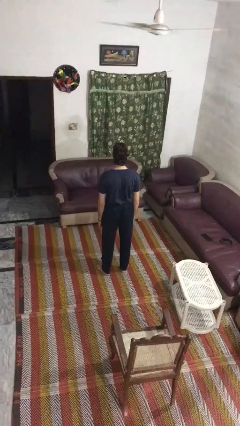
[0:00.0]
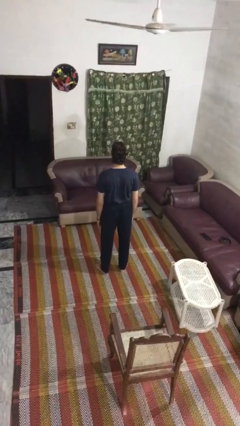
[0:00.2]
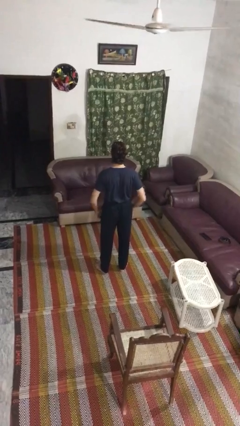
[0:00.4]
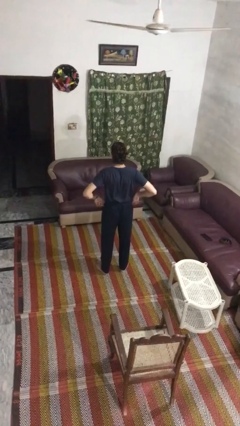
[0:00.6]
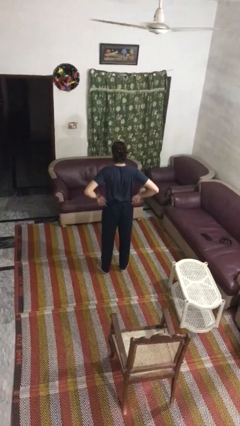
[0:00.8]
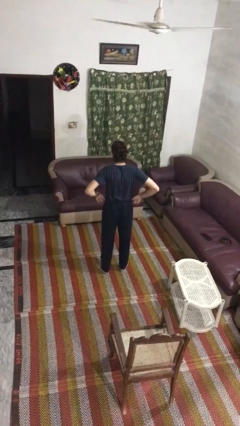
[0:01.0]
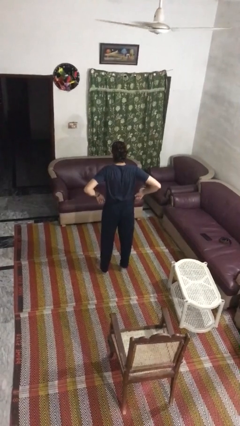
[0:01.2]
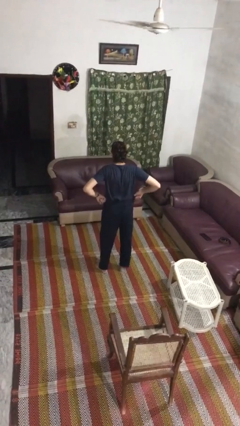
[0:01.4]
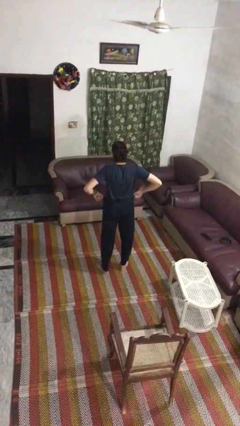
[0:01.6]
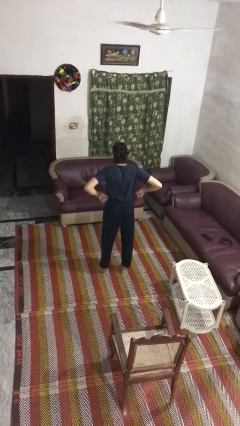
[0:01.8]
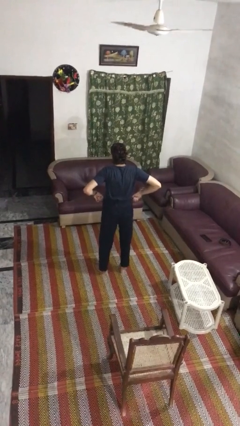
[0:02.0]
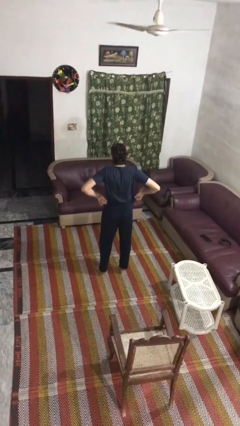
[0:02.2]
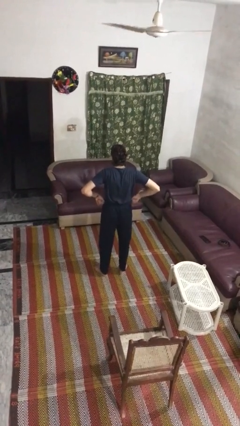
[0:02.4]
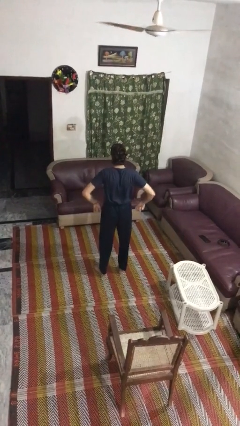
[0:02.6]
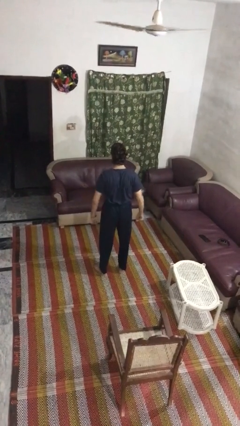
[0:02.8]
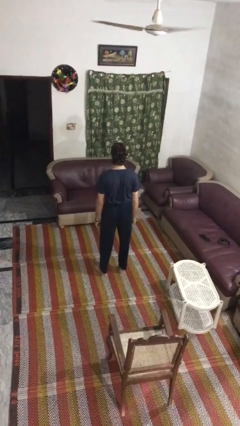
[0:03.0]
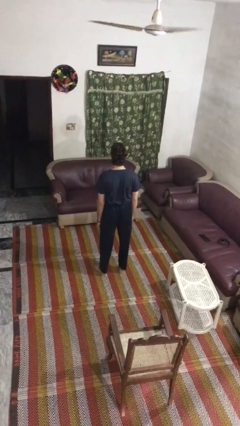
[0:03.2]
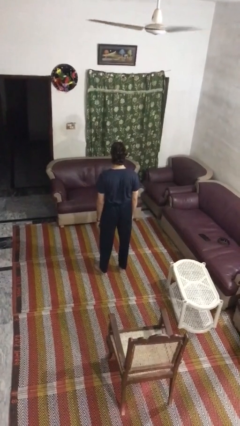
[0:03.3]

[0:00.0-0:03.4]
person hikes up pants

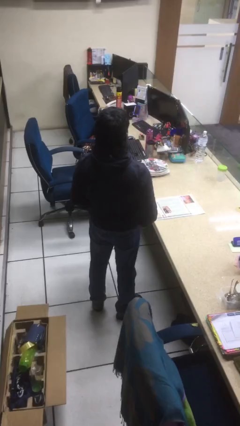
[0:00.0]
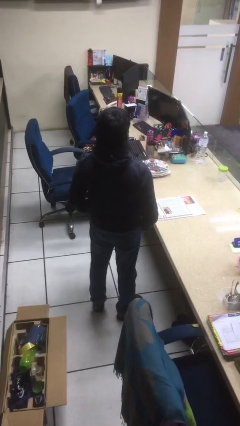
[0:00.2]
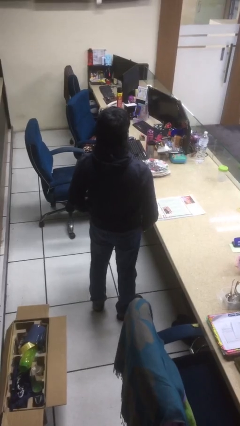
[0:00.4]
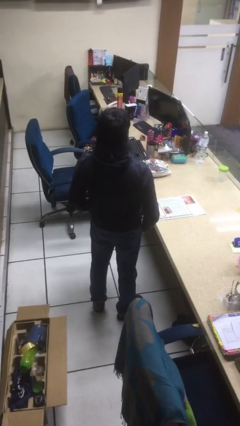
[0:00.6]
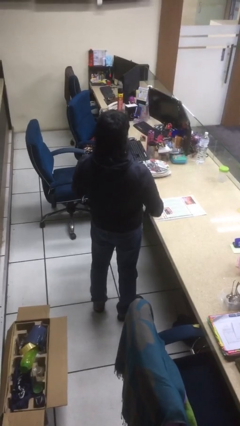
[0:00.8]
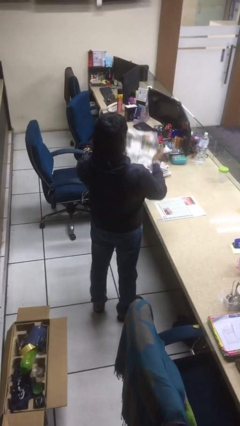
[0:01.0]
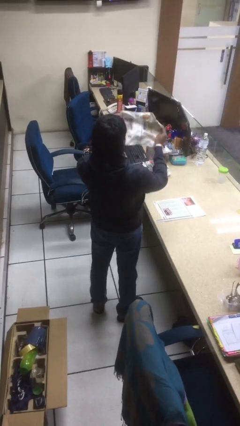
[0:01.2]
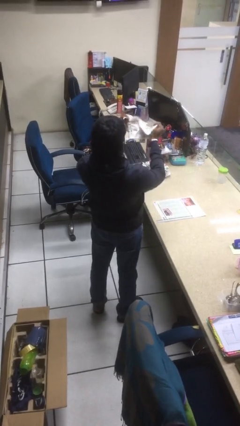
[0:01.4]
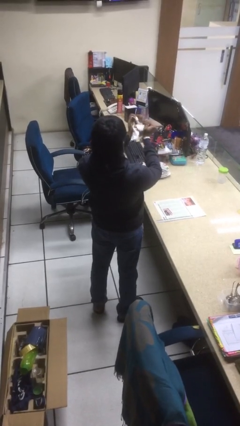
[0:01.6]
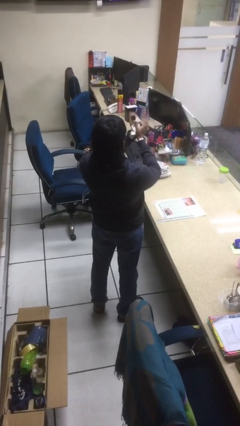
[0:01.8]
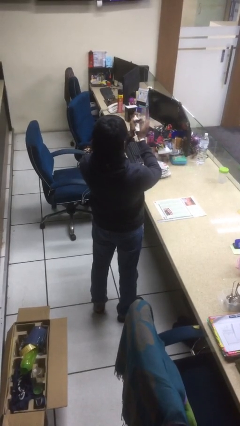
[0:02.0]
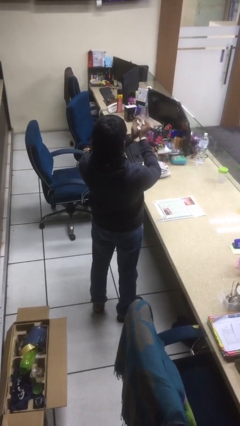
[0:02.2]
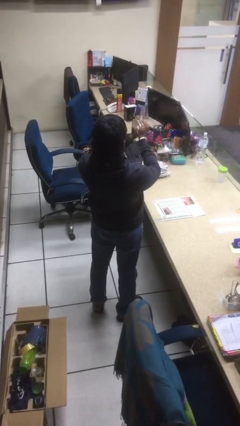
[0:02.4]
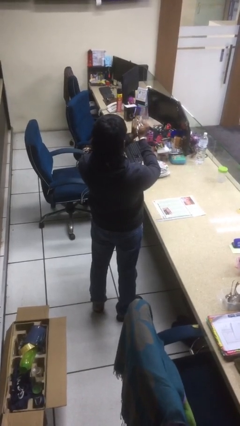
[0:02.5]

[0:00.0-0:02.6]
person crumples paper

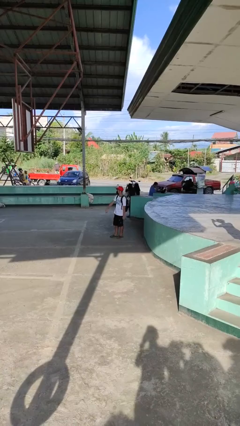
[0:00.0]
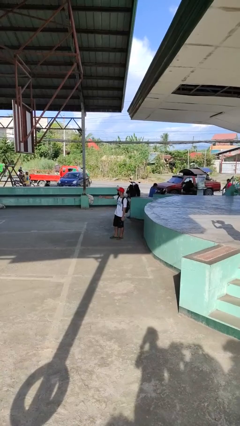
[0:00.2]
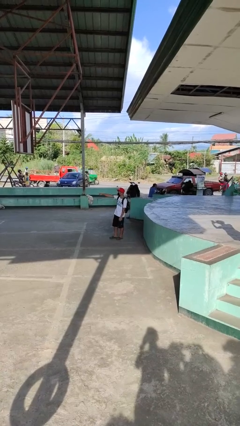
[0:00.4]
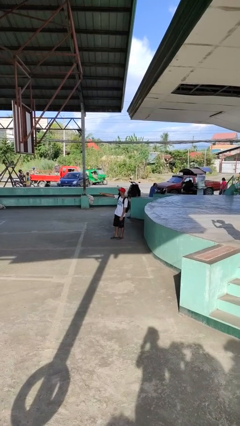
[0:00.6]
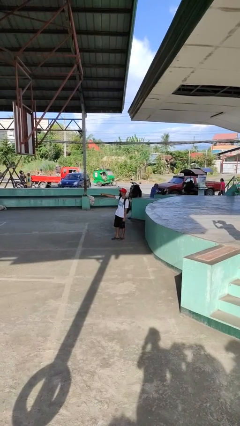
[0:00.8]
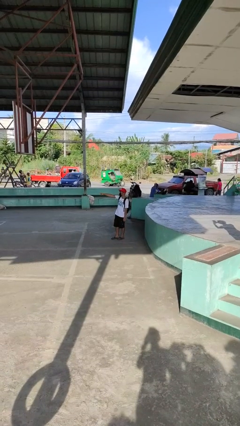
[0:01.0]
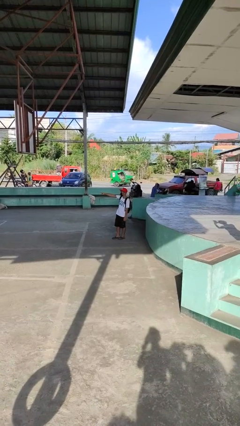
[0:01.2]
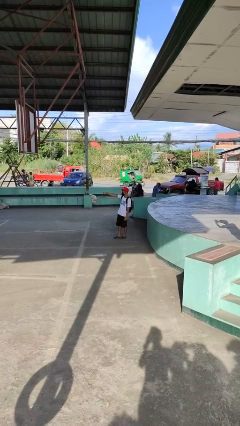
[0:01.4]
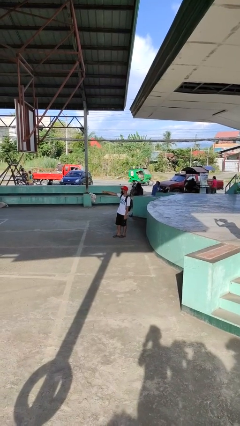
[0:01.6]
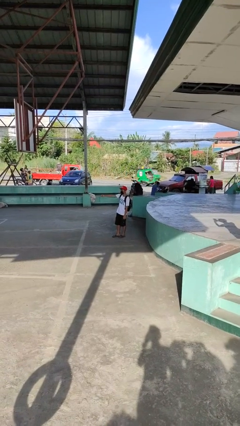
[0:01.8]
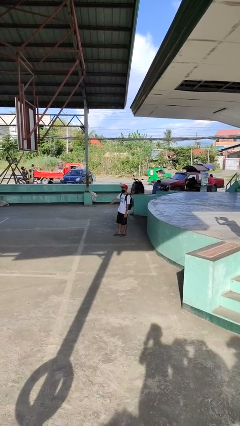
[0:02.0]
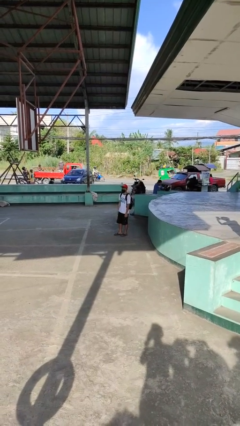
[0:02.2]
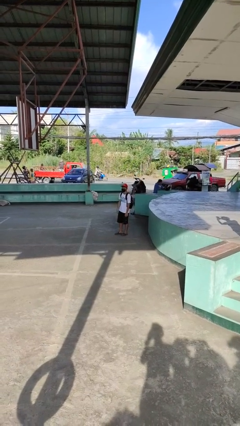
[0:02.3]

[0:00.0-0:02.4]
person points at person

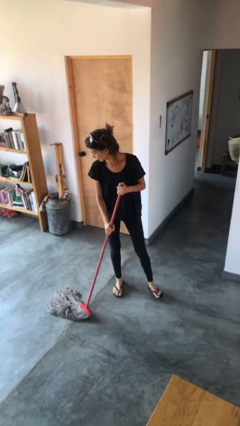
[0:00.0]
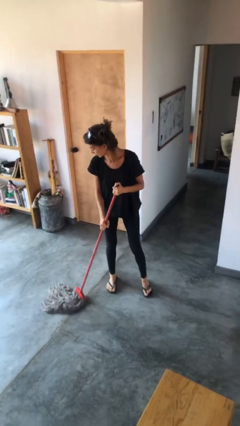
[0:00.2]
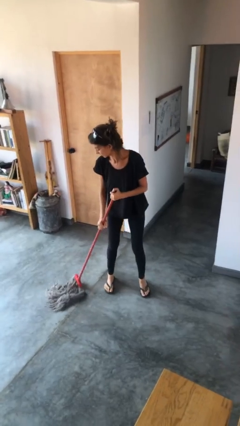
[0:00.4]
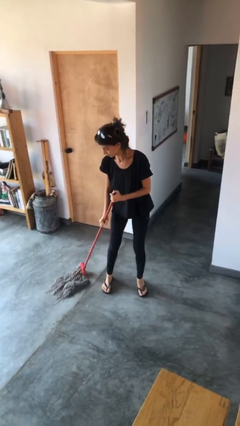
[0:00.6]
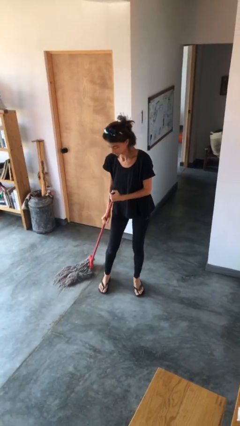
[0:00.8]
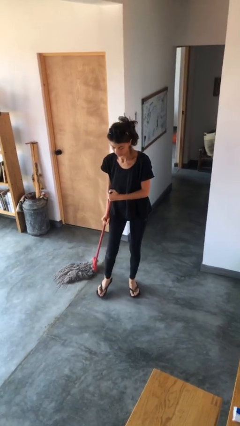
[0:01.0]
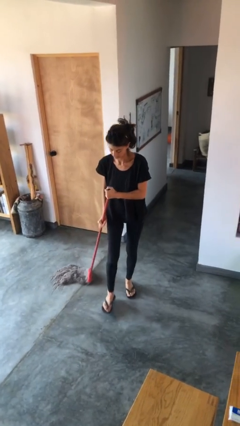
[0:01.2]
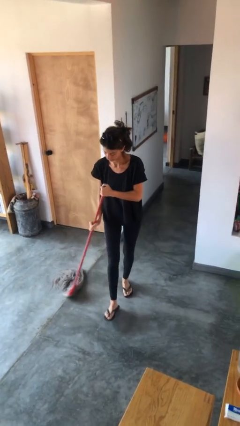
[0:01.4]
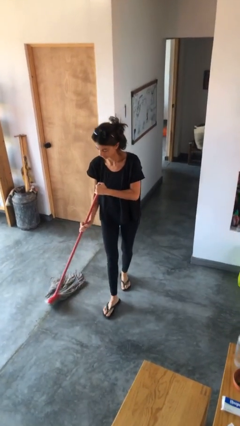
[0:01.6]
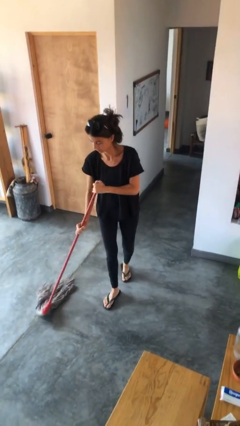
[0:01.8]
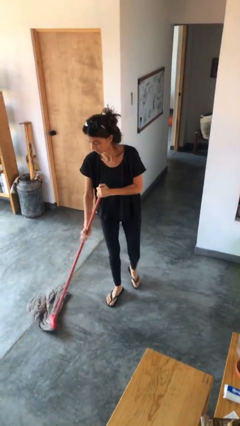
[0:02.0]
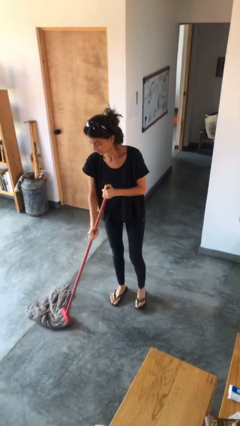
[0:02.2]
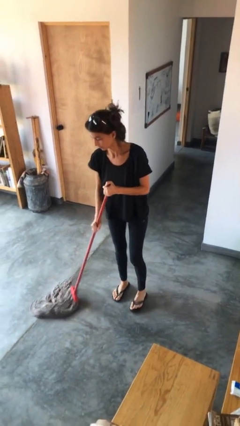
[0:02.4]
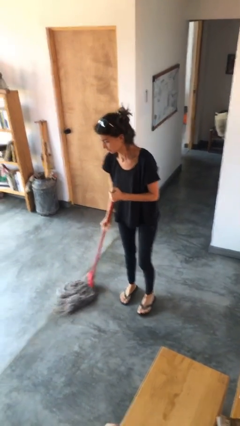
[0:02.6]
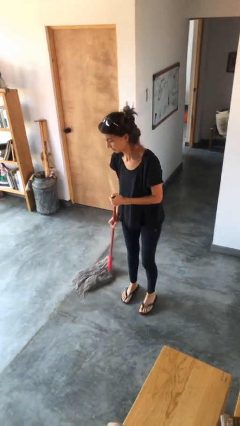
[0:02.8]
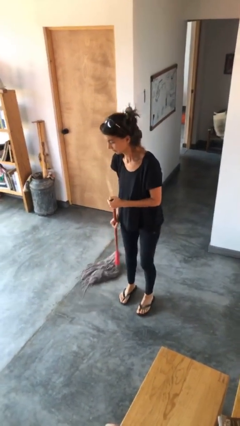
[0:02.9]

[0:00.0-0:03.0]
person mops

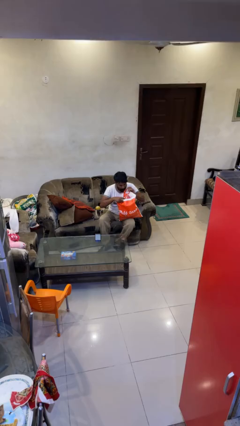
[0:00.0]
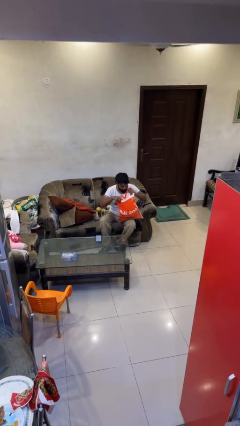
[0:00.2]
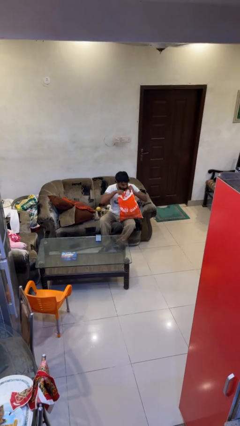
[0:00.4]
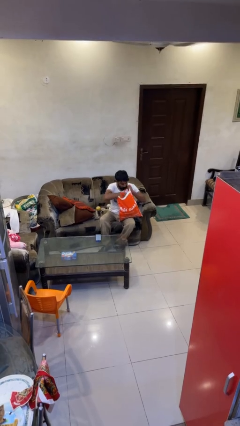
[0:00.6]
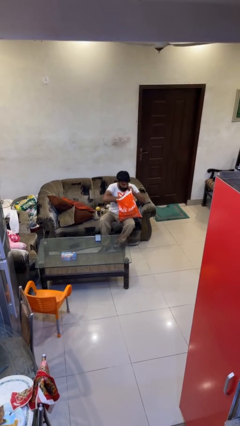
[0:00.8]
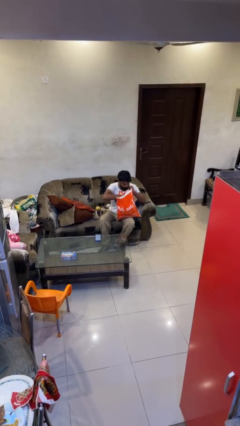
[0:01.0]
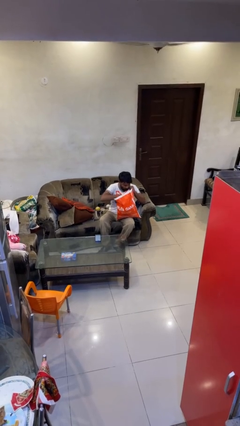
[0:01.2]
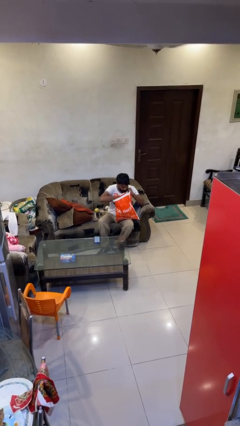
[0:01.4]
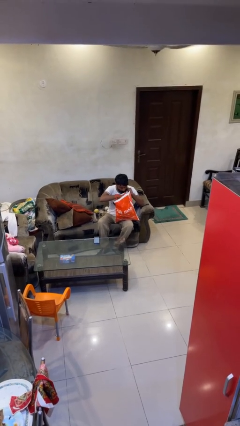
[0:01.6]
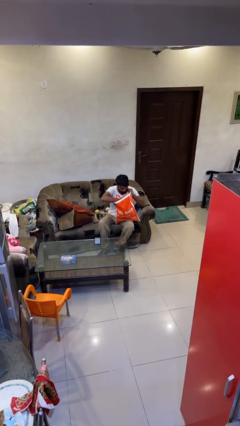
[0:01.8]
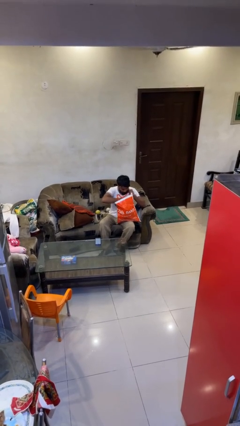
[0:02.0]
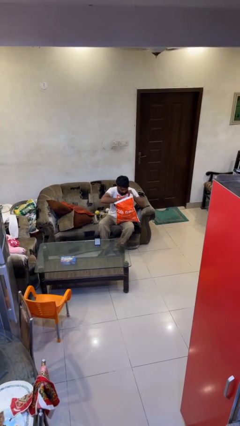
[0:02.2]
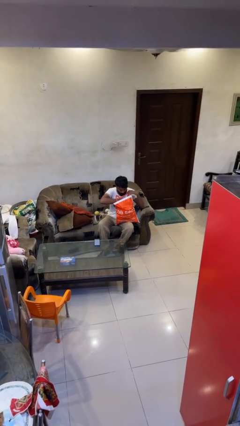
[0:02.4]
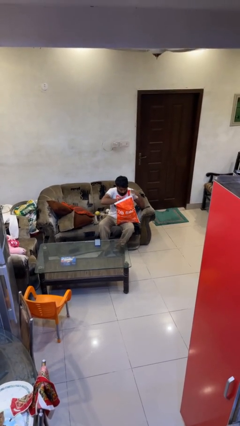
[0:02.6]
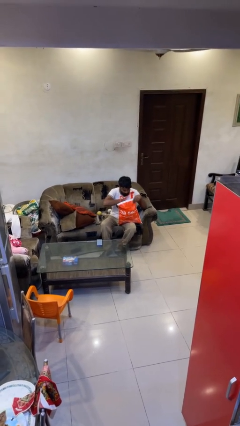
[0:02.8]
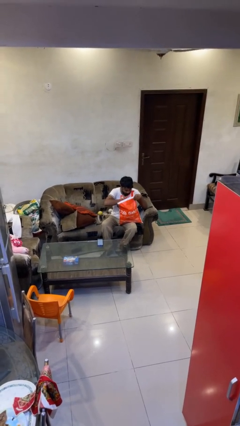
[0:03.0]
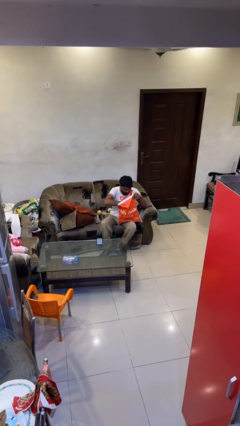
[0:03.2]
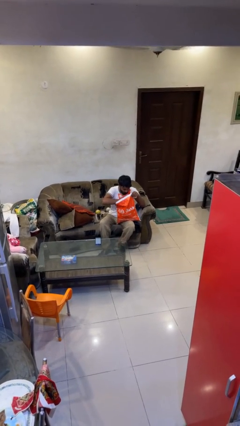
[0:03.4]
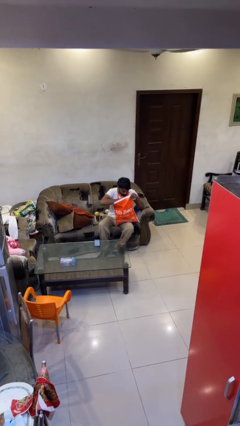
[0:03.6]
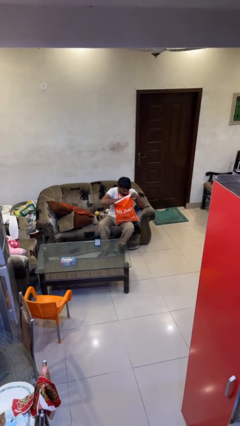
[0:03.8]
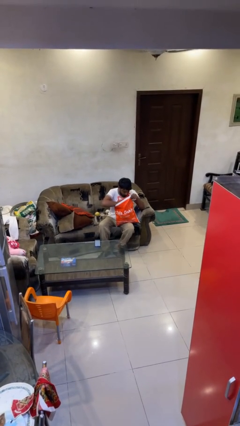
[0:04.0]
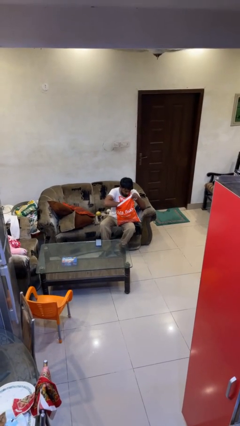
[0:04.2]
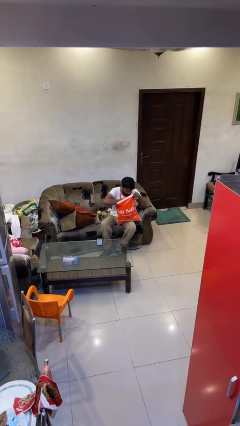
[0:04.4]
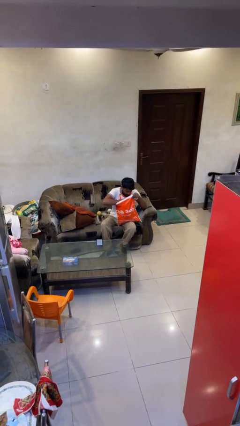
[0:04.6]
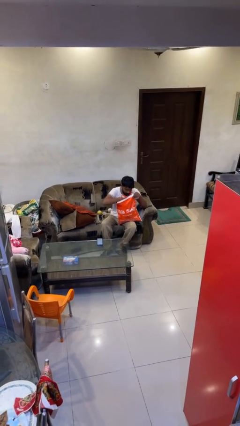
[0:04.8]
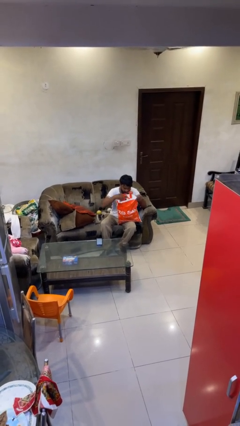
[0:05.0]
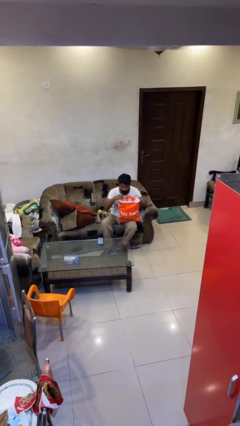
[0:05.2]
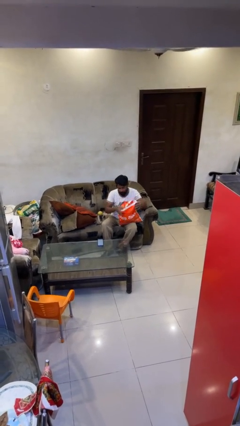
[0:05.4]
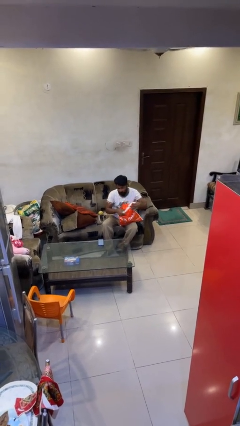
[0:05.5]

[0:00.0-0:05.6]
person searches in bag
